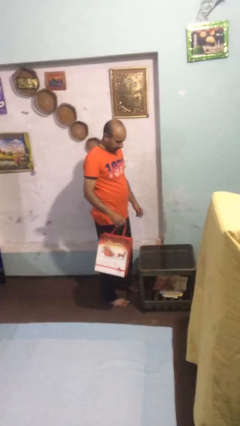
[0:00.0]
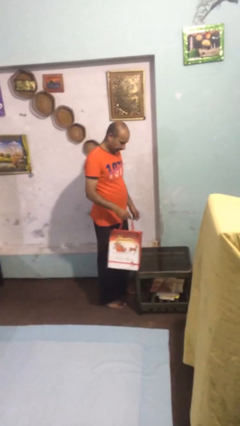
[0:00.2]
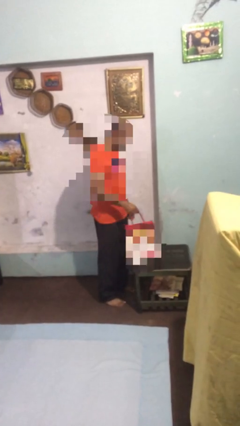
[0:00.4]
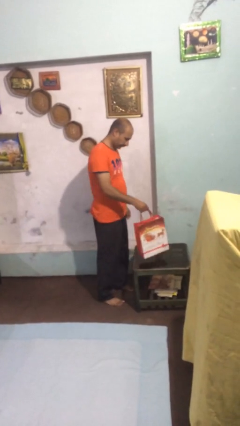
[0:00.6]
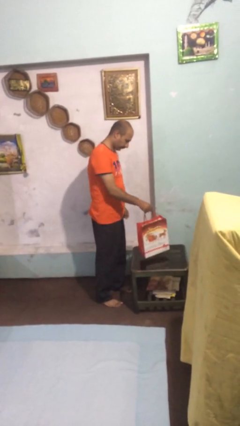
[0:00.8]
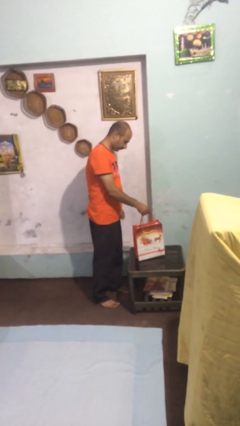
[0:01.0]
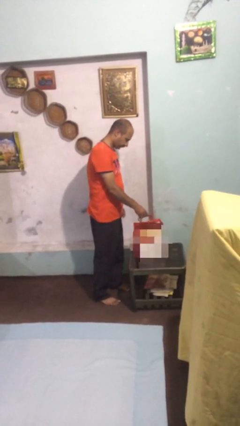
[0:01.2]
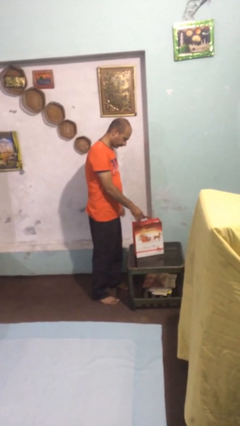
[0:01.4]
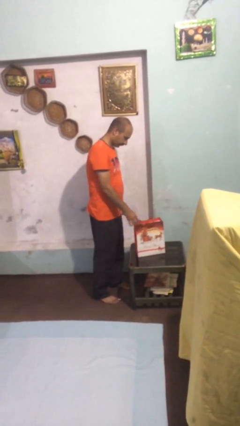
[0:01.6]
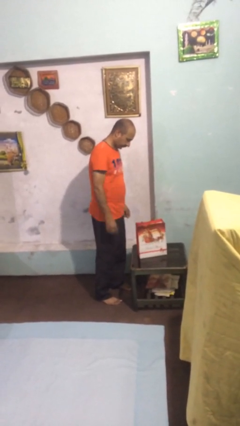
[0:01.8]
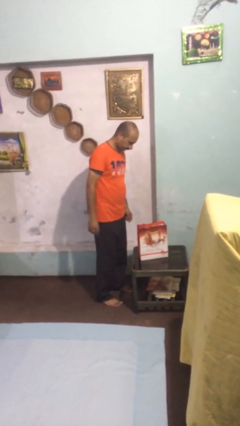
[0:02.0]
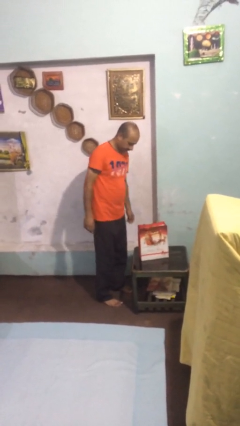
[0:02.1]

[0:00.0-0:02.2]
person puts down object on table

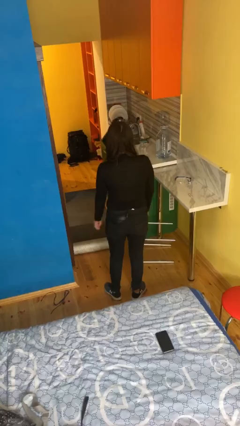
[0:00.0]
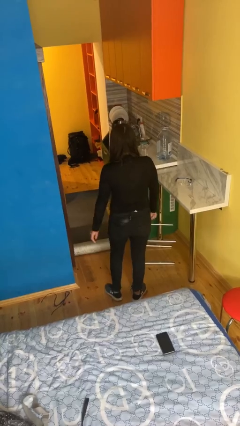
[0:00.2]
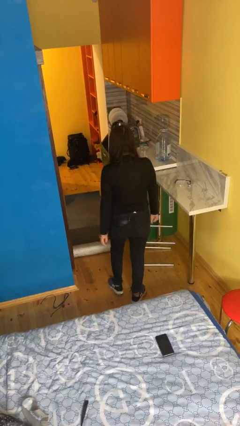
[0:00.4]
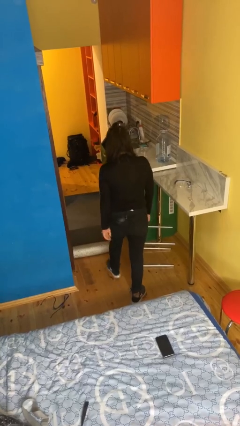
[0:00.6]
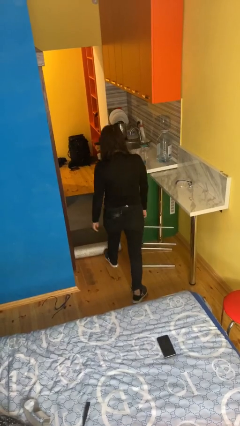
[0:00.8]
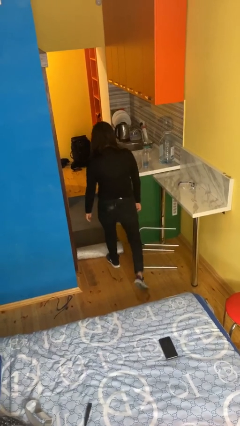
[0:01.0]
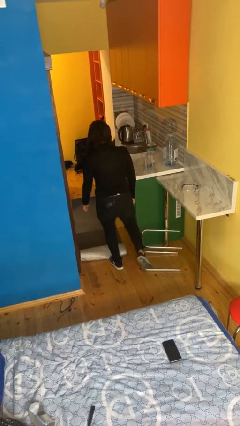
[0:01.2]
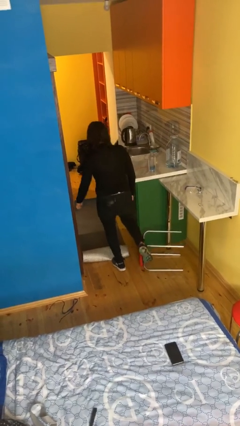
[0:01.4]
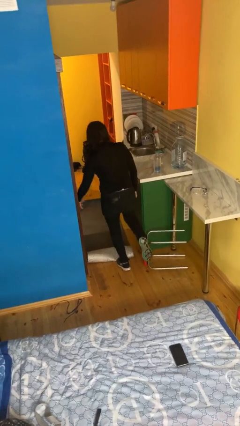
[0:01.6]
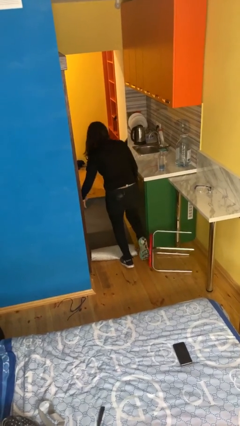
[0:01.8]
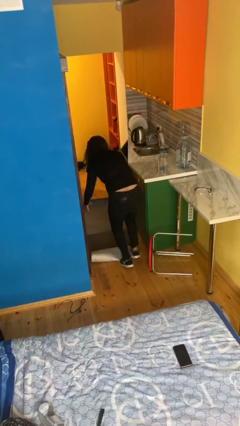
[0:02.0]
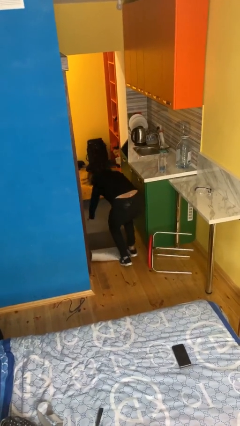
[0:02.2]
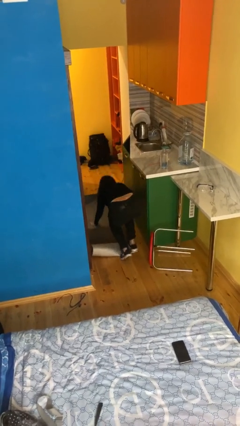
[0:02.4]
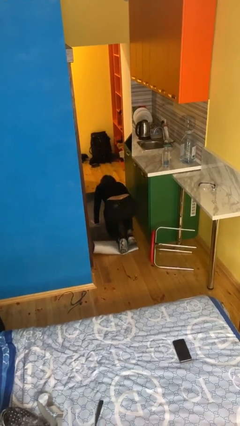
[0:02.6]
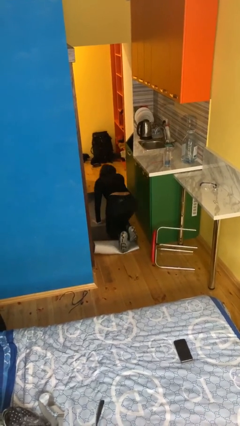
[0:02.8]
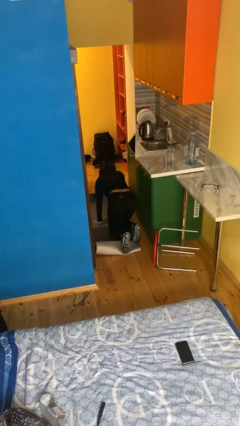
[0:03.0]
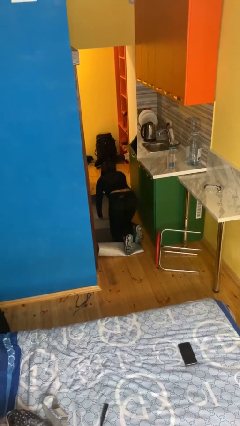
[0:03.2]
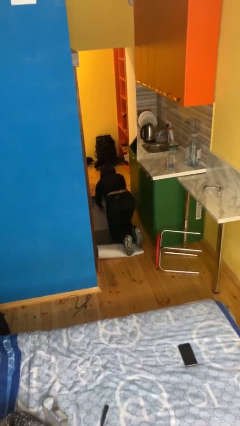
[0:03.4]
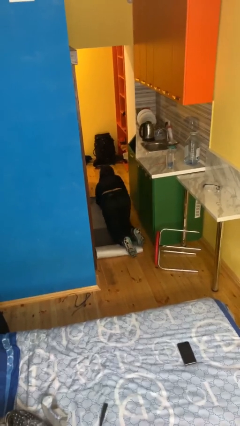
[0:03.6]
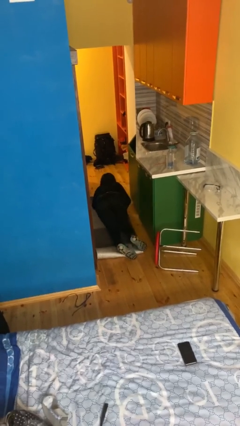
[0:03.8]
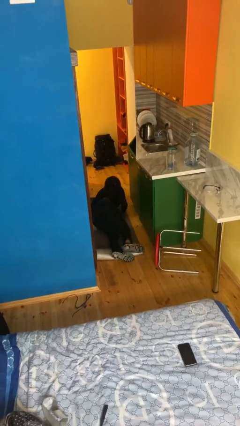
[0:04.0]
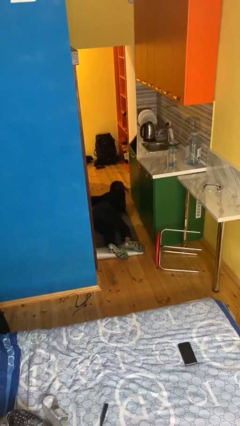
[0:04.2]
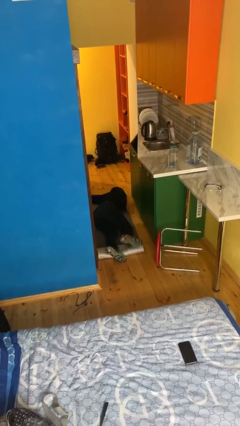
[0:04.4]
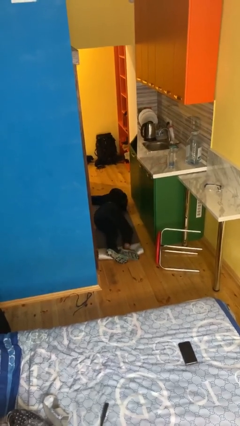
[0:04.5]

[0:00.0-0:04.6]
person trips on object on floor

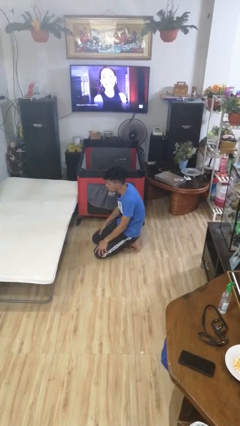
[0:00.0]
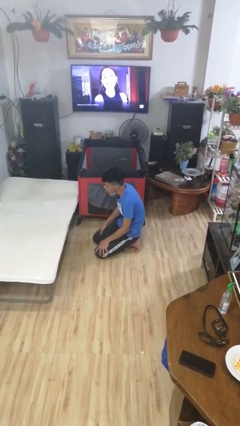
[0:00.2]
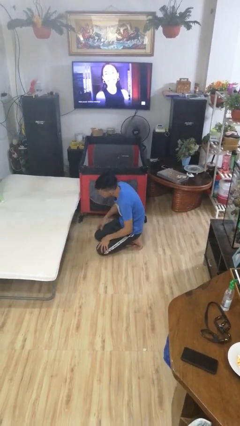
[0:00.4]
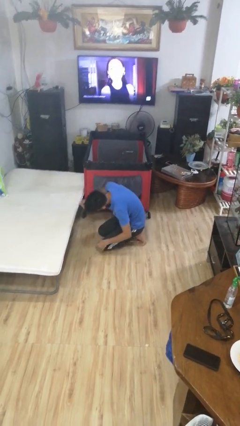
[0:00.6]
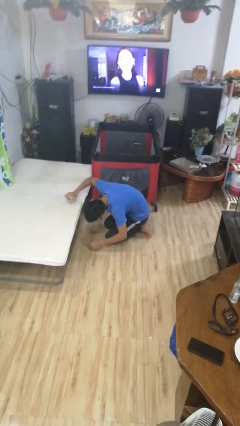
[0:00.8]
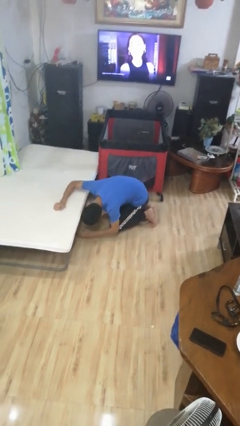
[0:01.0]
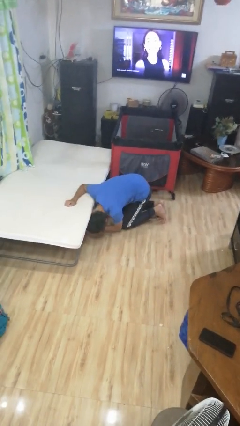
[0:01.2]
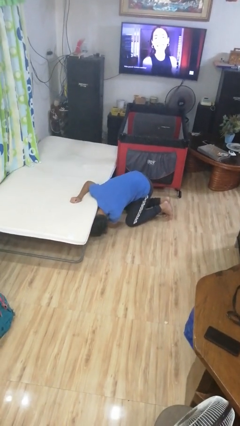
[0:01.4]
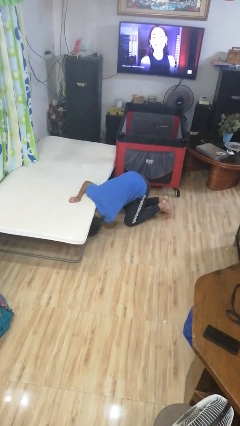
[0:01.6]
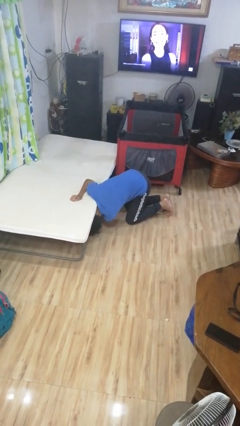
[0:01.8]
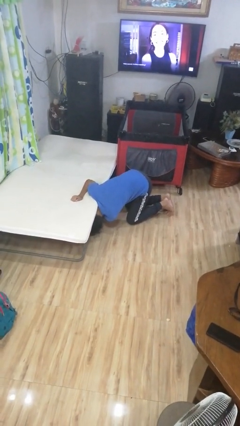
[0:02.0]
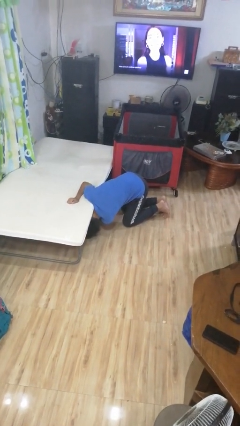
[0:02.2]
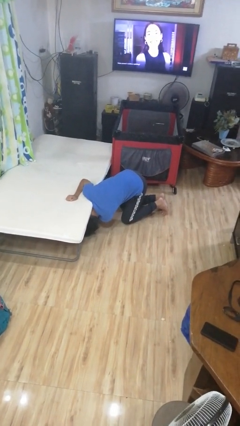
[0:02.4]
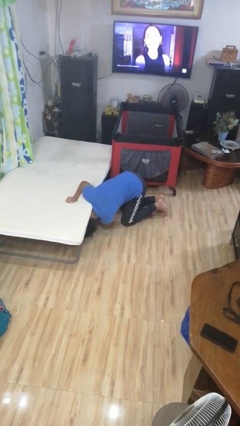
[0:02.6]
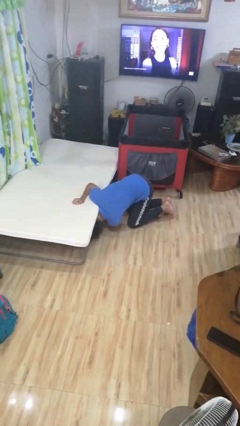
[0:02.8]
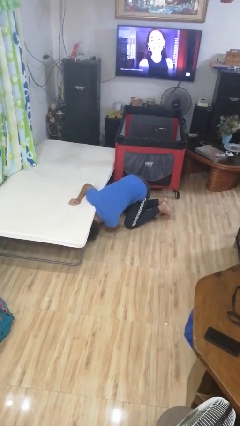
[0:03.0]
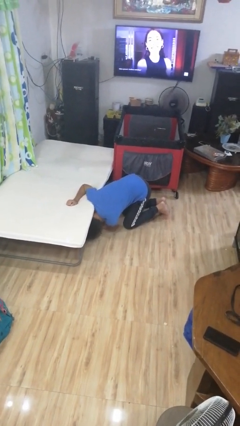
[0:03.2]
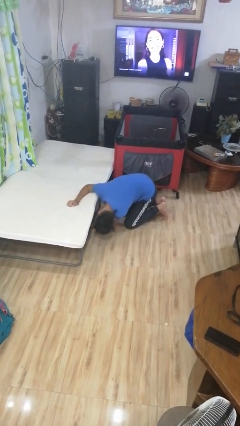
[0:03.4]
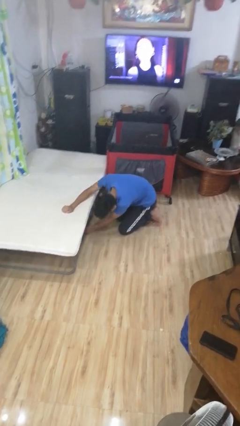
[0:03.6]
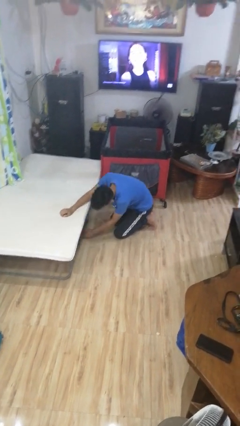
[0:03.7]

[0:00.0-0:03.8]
person searches under bed

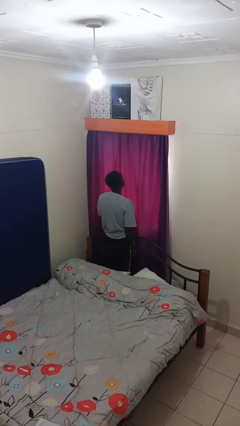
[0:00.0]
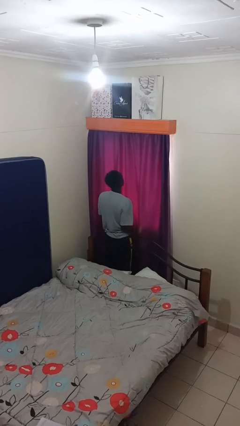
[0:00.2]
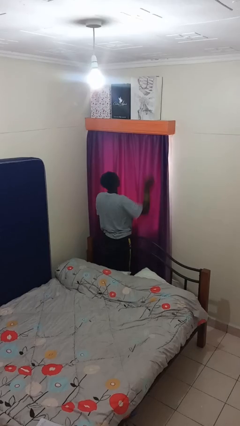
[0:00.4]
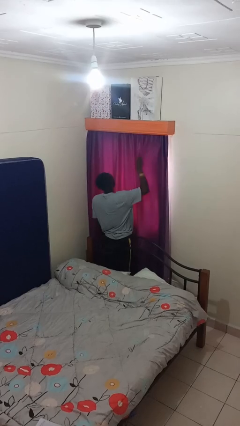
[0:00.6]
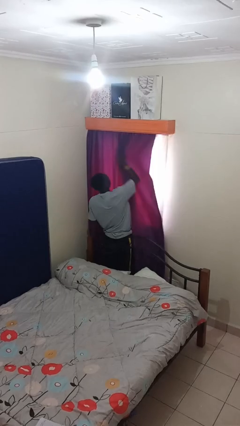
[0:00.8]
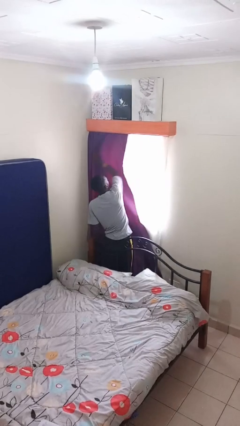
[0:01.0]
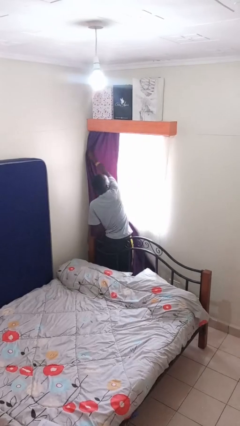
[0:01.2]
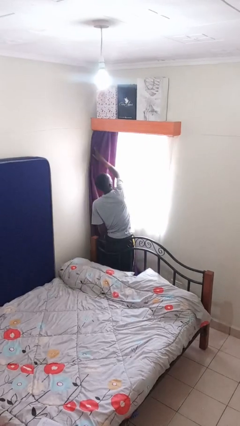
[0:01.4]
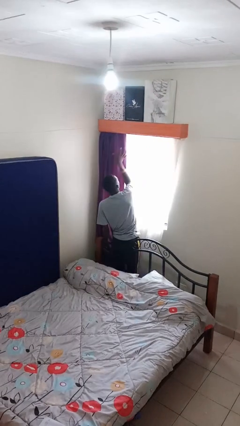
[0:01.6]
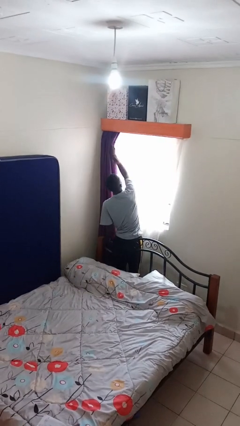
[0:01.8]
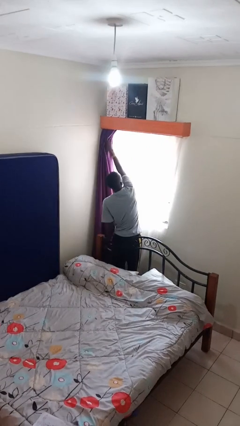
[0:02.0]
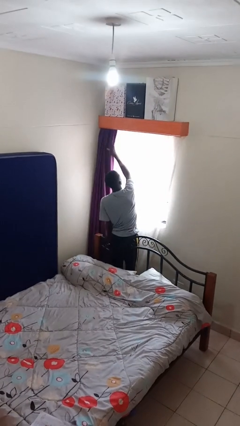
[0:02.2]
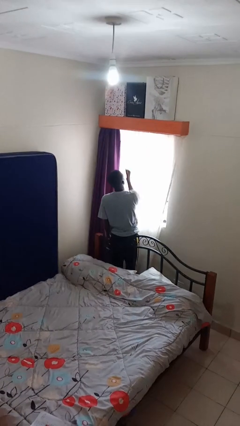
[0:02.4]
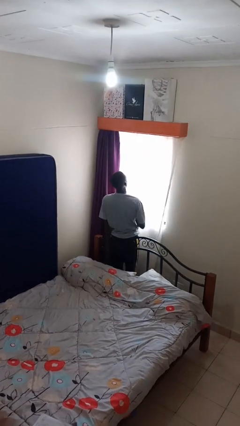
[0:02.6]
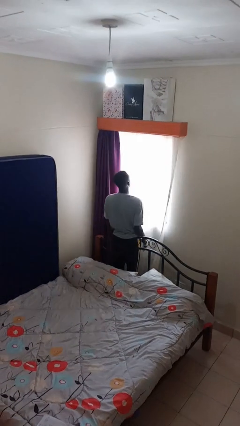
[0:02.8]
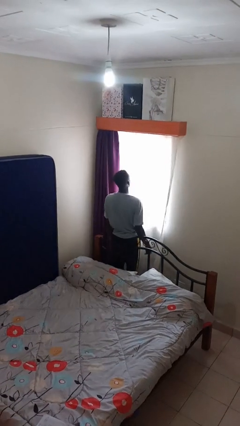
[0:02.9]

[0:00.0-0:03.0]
person opens curtains

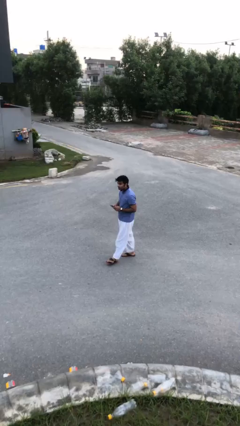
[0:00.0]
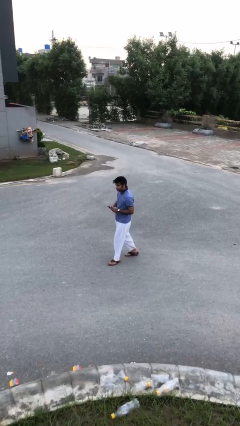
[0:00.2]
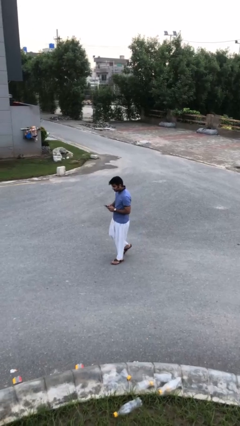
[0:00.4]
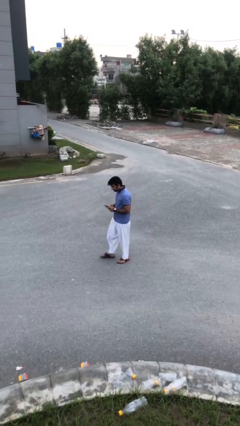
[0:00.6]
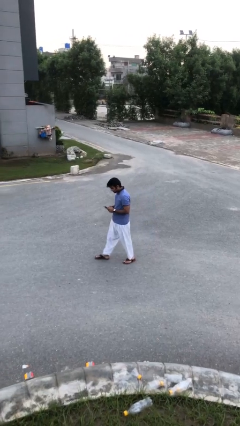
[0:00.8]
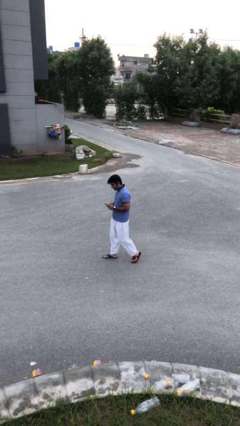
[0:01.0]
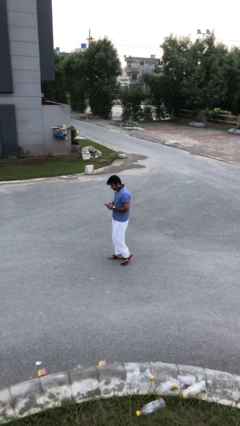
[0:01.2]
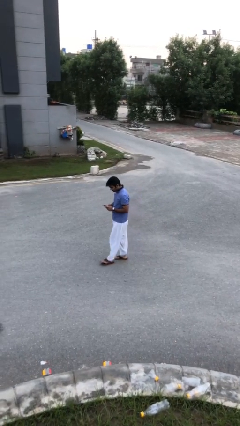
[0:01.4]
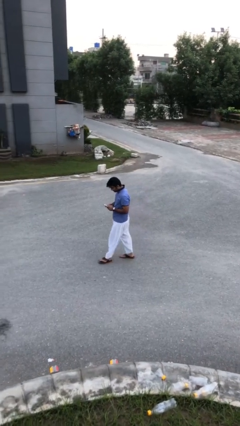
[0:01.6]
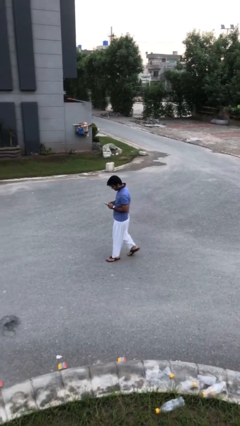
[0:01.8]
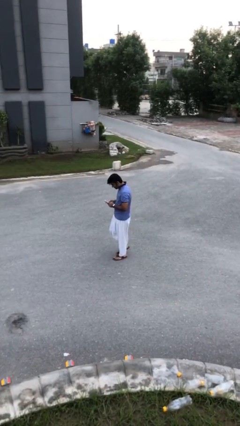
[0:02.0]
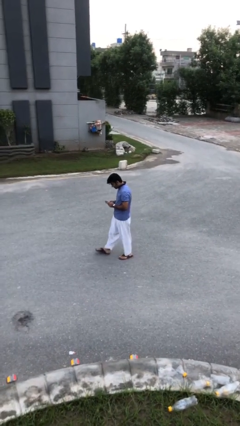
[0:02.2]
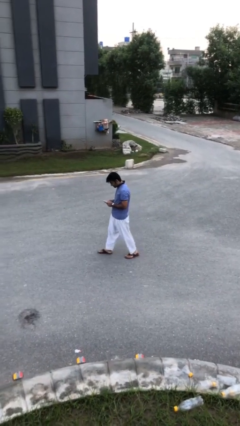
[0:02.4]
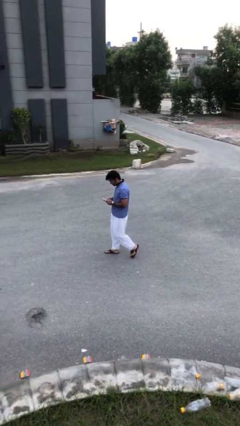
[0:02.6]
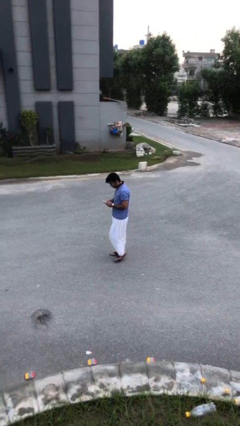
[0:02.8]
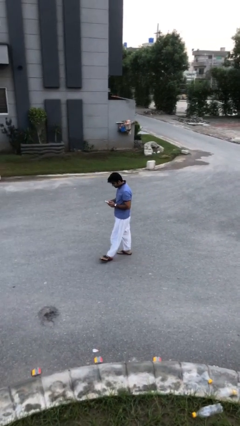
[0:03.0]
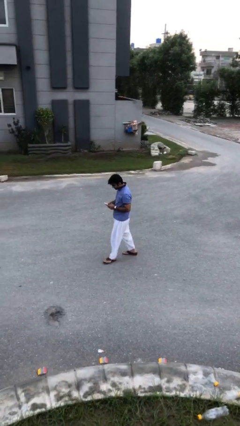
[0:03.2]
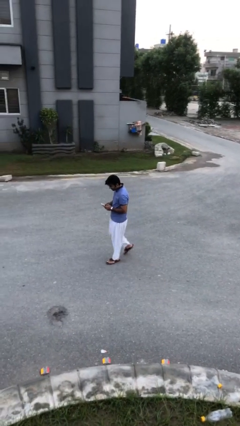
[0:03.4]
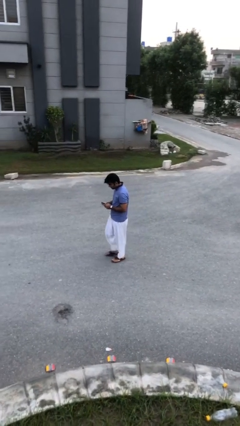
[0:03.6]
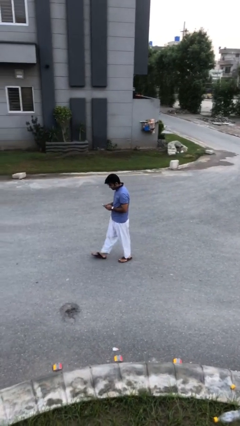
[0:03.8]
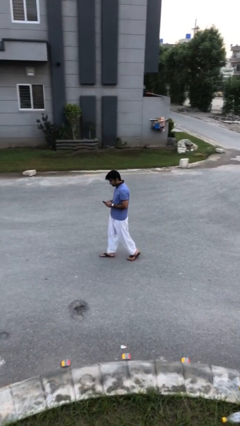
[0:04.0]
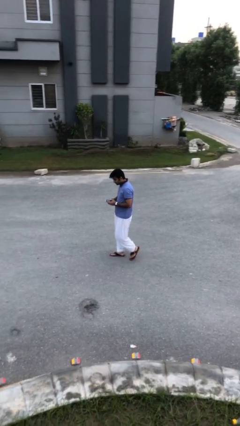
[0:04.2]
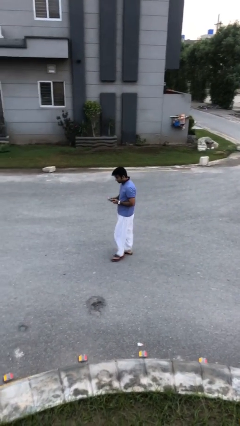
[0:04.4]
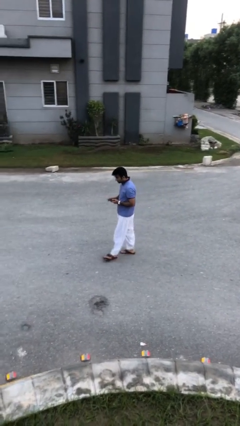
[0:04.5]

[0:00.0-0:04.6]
person texts on phone
